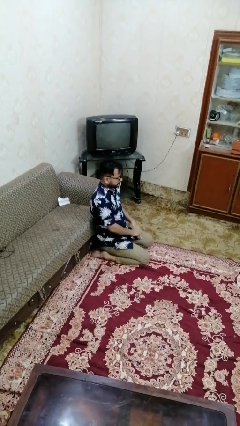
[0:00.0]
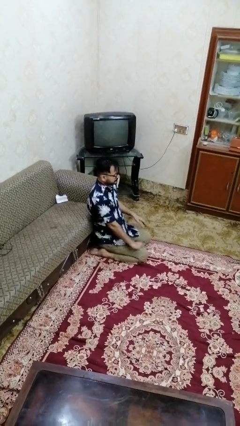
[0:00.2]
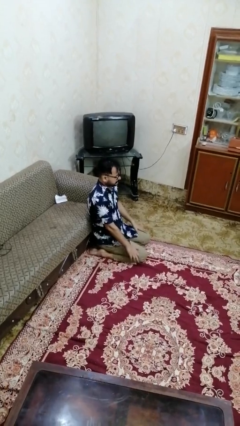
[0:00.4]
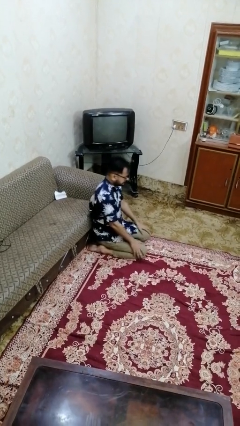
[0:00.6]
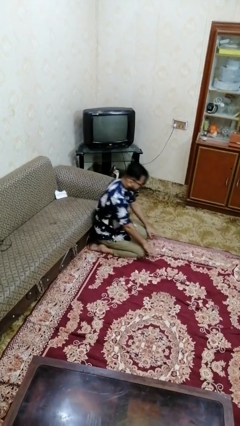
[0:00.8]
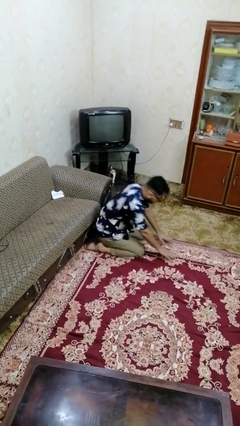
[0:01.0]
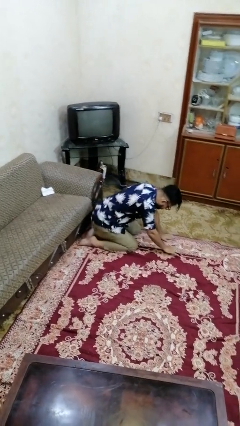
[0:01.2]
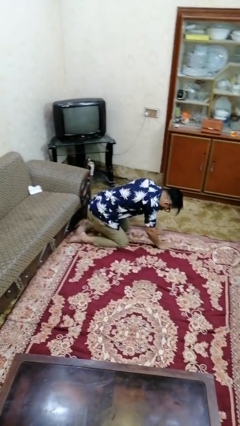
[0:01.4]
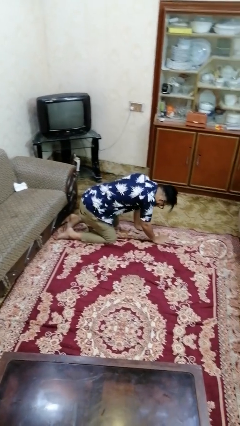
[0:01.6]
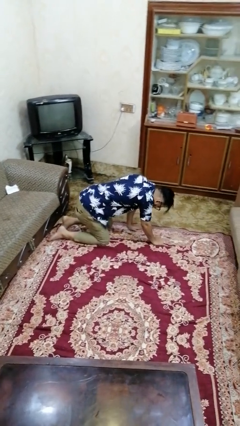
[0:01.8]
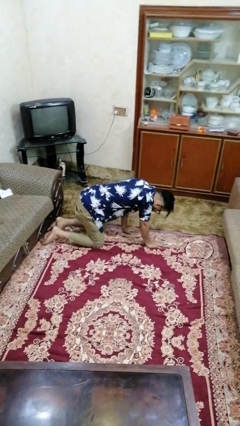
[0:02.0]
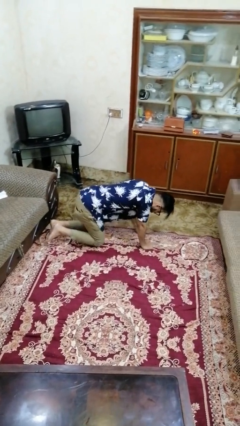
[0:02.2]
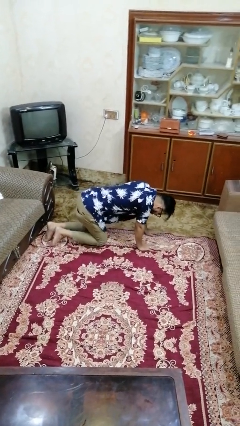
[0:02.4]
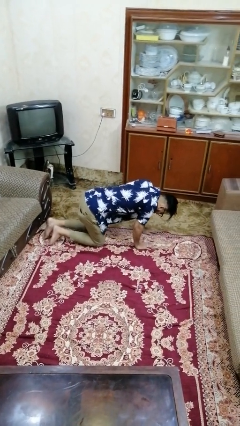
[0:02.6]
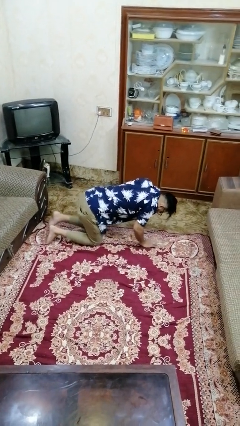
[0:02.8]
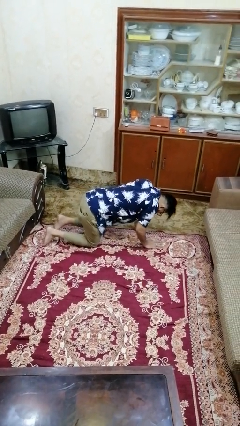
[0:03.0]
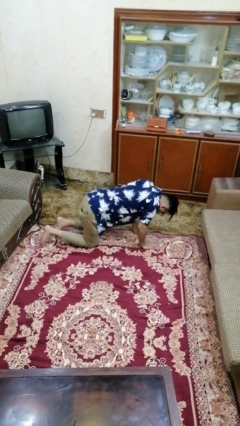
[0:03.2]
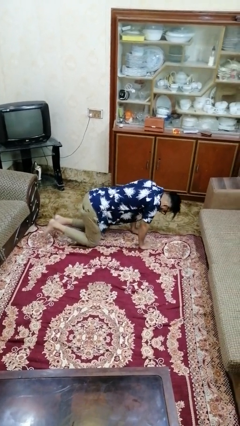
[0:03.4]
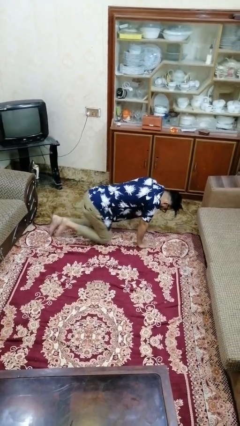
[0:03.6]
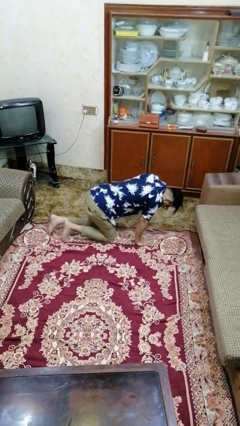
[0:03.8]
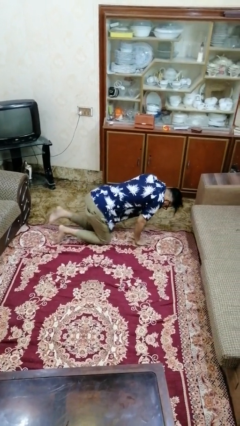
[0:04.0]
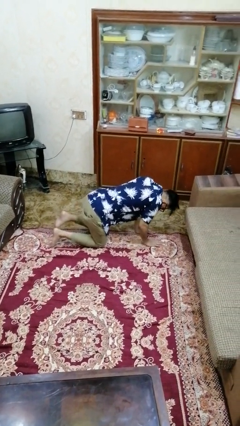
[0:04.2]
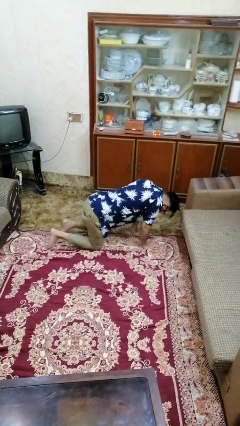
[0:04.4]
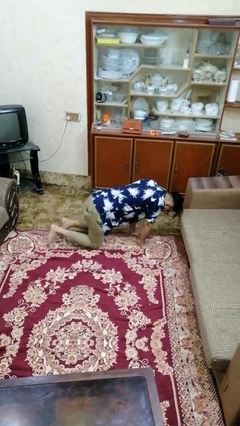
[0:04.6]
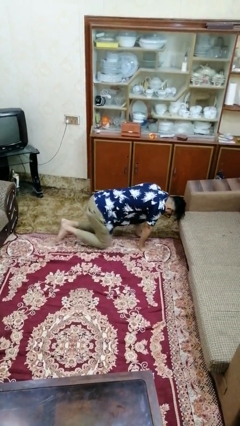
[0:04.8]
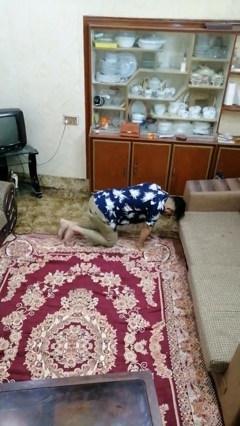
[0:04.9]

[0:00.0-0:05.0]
person crawls

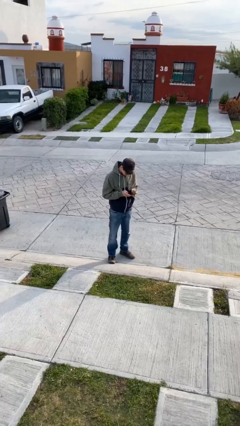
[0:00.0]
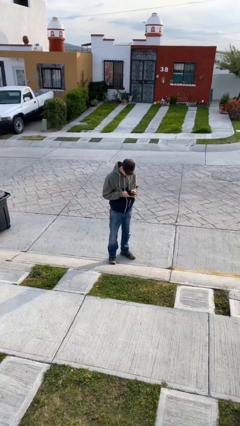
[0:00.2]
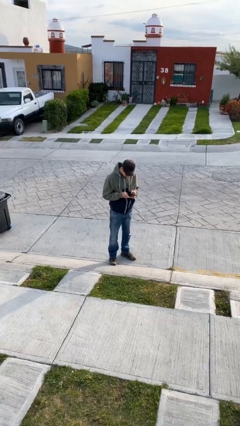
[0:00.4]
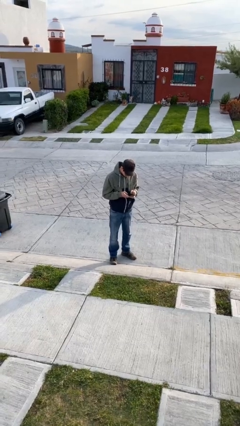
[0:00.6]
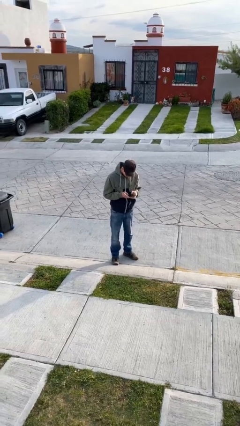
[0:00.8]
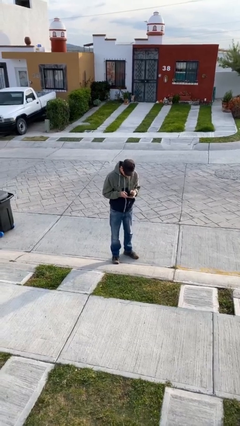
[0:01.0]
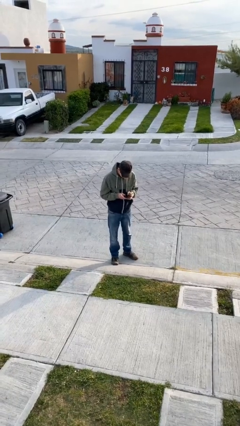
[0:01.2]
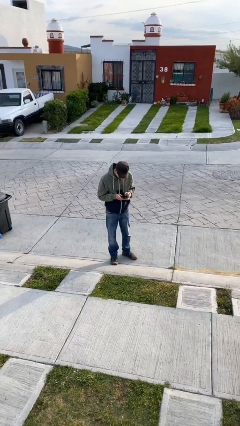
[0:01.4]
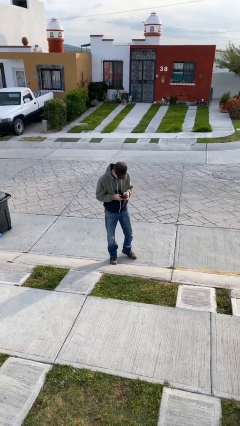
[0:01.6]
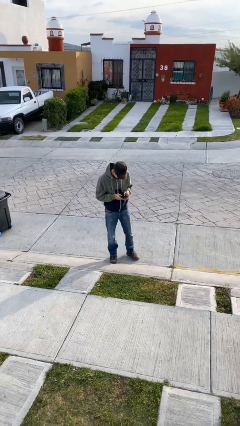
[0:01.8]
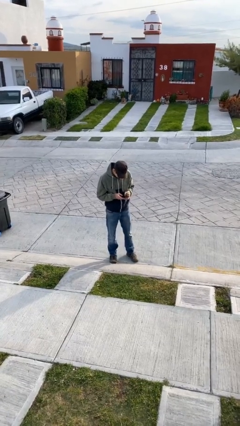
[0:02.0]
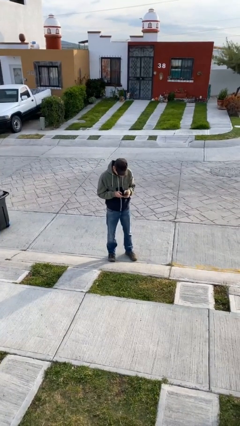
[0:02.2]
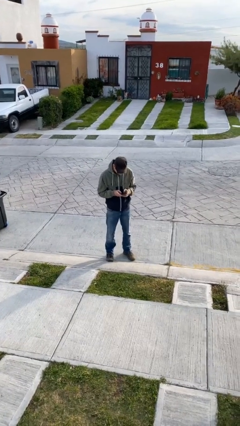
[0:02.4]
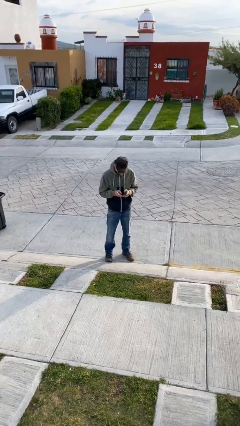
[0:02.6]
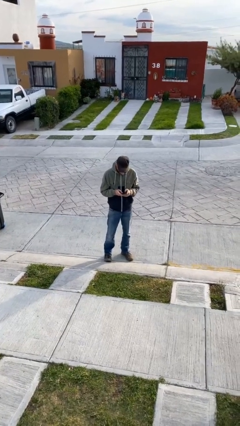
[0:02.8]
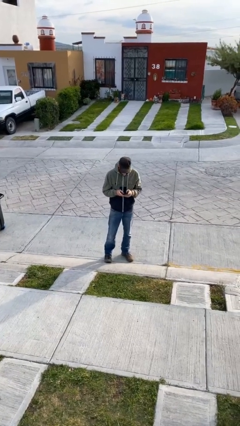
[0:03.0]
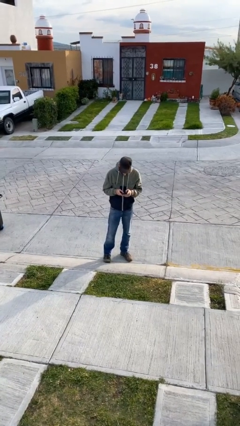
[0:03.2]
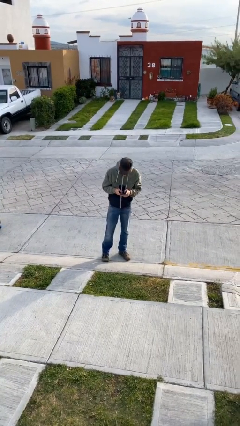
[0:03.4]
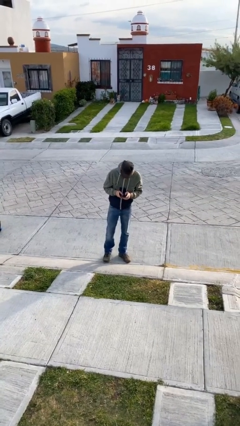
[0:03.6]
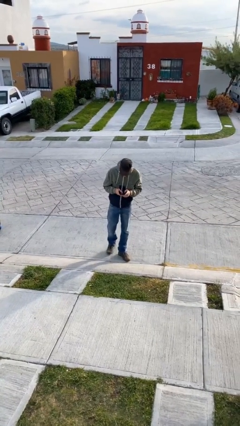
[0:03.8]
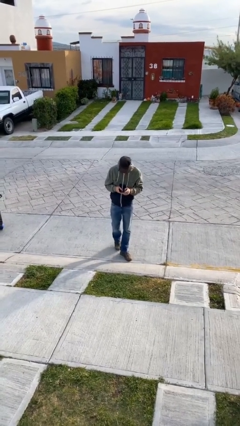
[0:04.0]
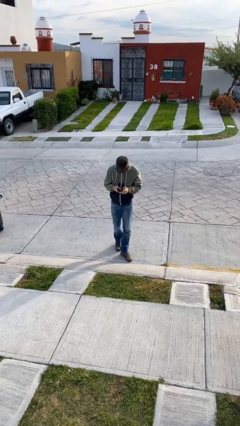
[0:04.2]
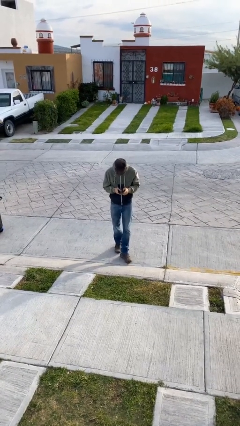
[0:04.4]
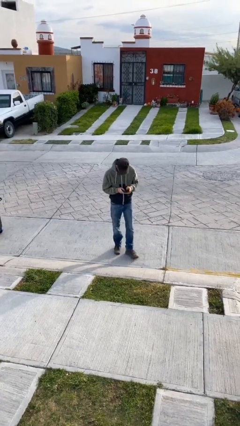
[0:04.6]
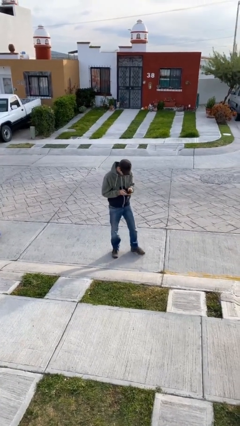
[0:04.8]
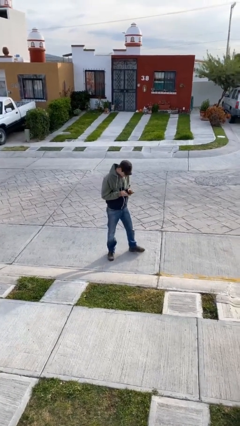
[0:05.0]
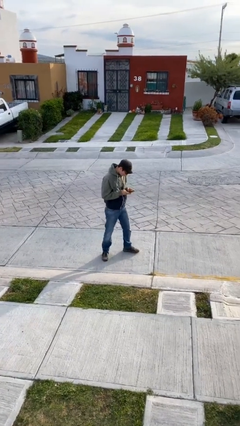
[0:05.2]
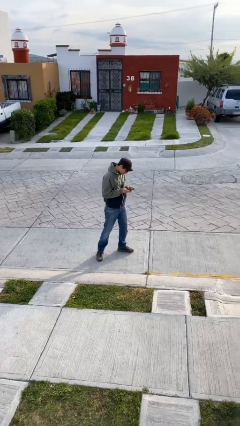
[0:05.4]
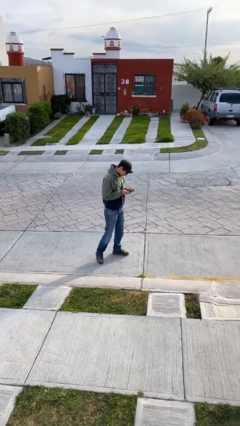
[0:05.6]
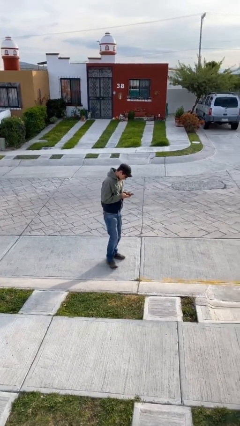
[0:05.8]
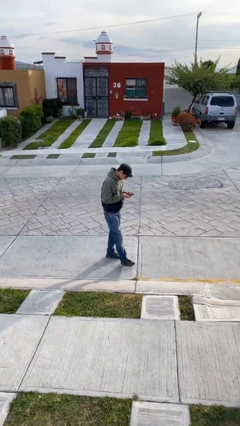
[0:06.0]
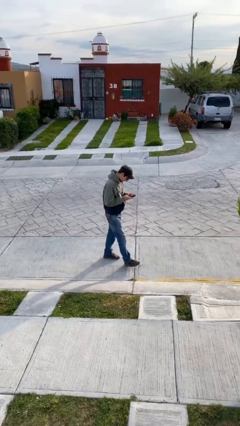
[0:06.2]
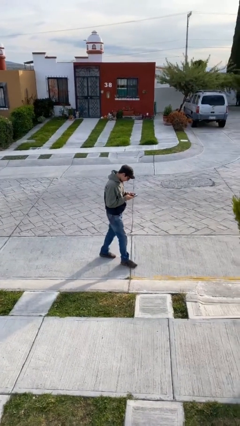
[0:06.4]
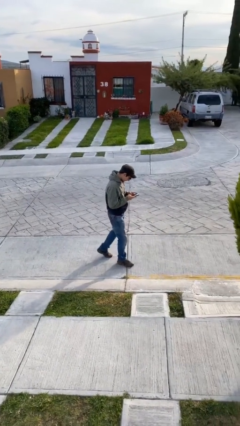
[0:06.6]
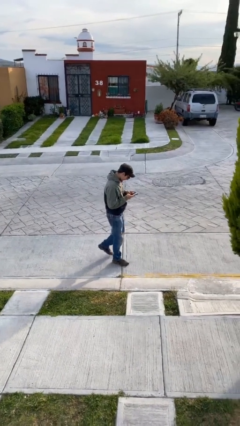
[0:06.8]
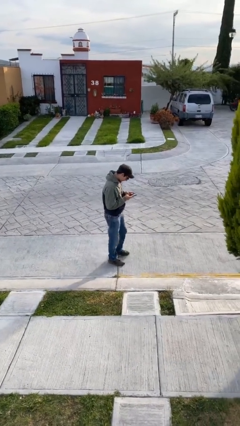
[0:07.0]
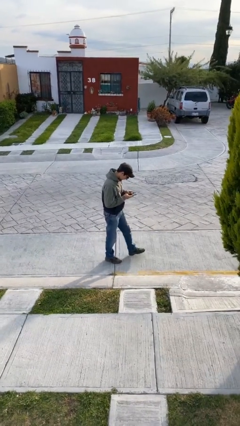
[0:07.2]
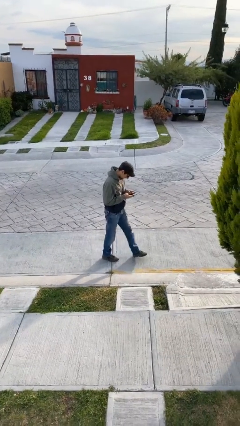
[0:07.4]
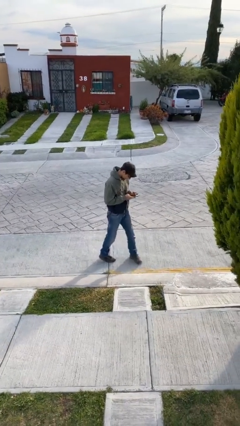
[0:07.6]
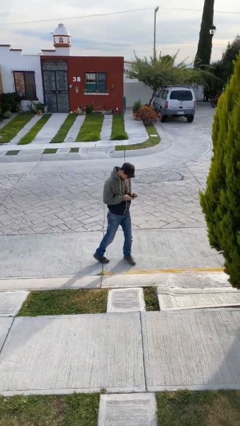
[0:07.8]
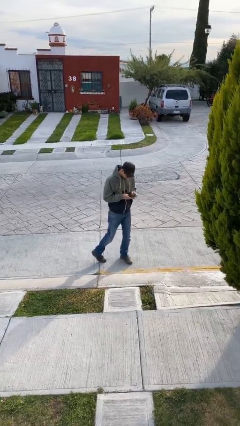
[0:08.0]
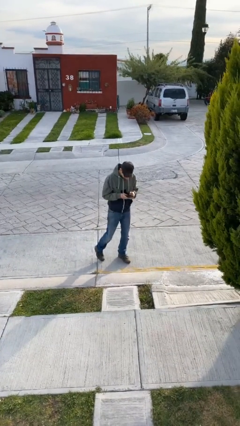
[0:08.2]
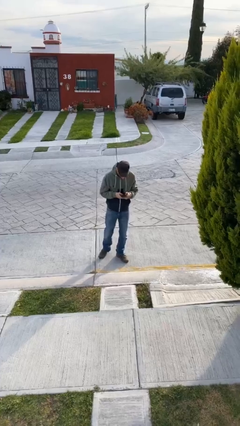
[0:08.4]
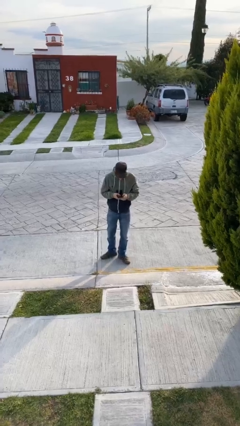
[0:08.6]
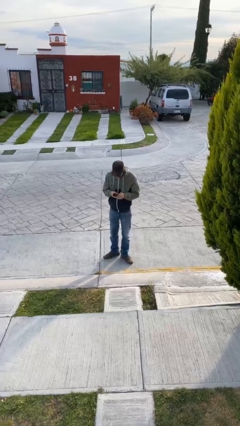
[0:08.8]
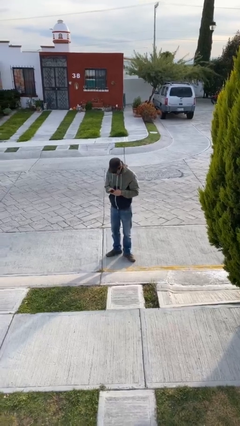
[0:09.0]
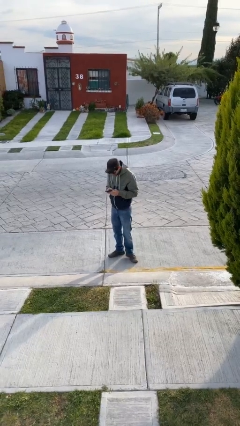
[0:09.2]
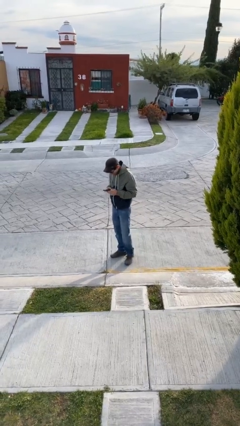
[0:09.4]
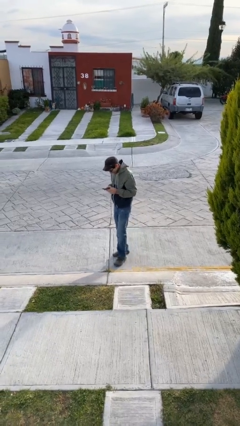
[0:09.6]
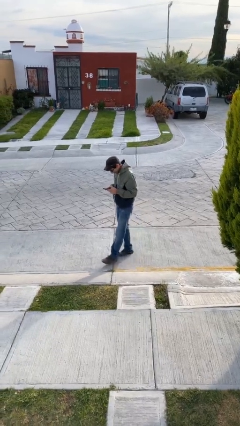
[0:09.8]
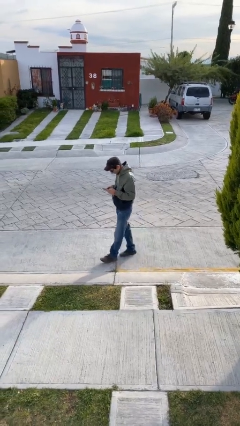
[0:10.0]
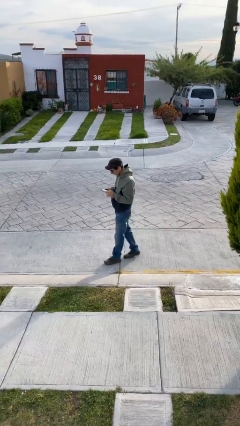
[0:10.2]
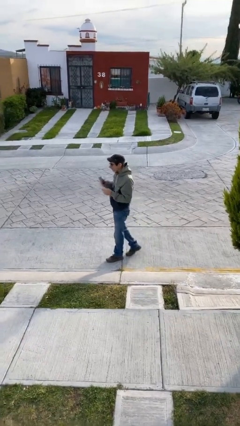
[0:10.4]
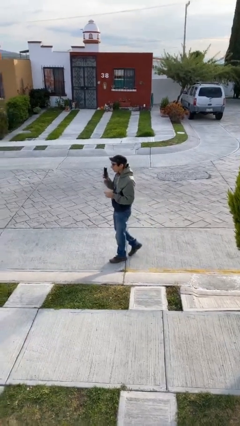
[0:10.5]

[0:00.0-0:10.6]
person texts on phone

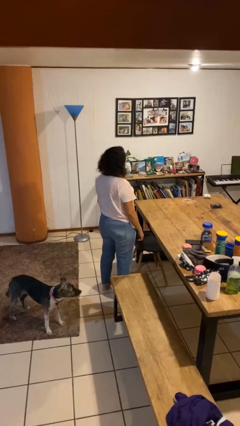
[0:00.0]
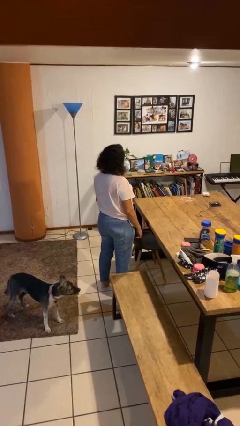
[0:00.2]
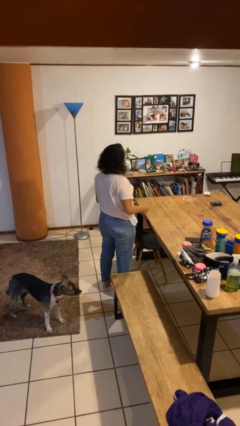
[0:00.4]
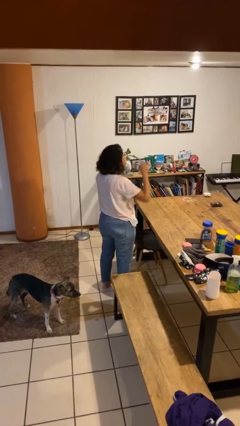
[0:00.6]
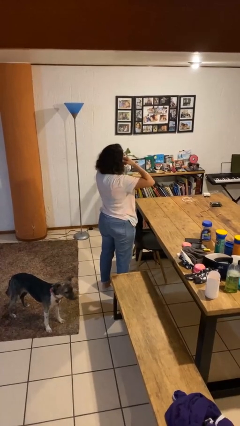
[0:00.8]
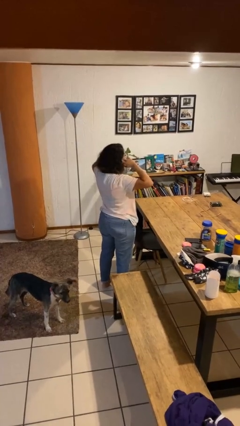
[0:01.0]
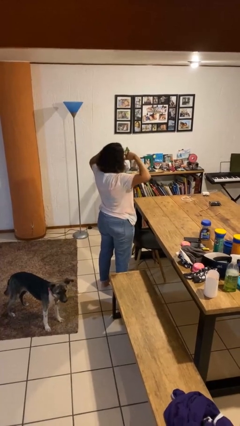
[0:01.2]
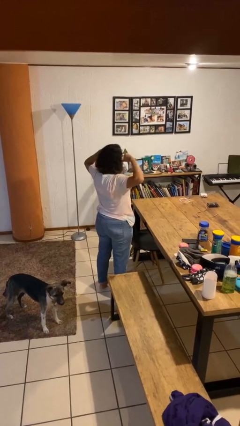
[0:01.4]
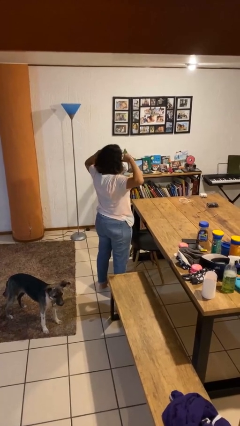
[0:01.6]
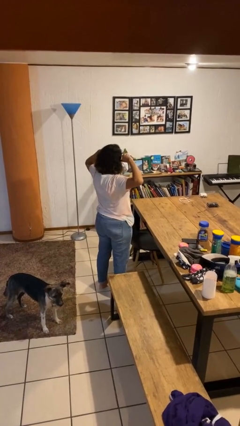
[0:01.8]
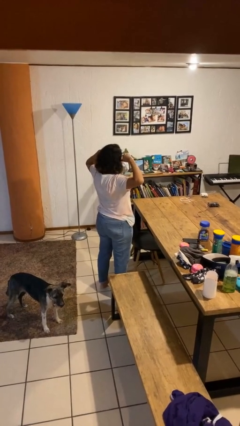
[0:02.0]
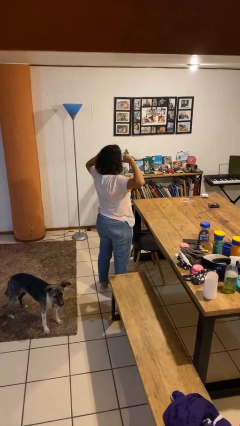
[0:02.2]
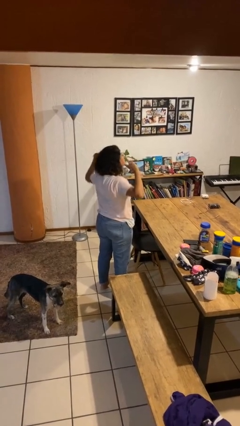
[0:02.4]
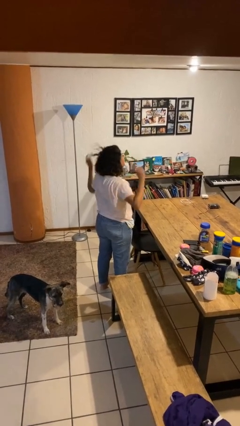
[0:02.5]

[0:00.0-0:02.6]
person puts fingers in ear
